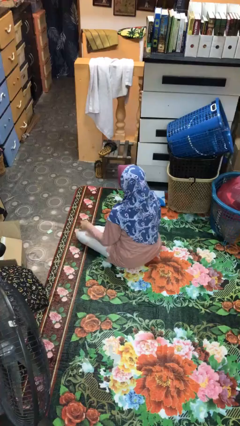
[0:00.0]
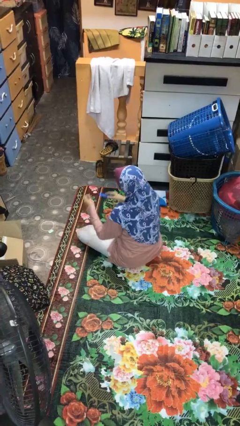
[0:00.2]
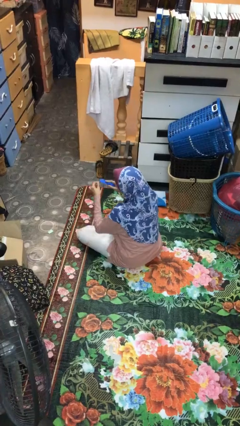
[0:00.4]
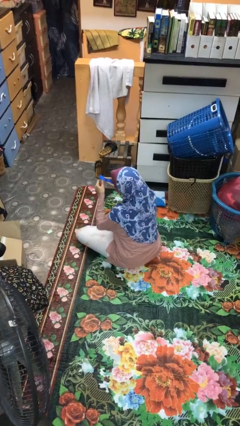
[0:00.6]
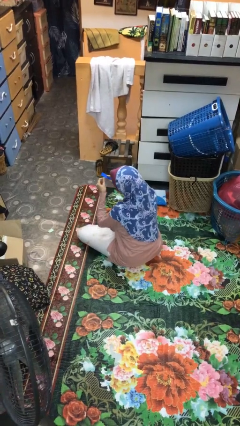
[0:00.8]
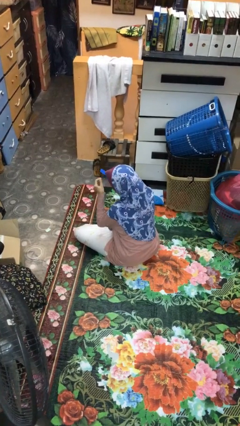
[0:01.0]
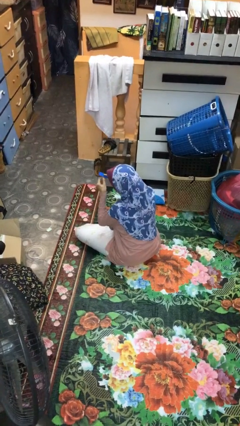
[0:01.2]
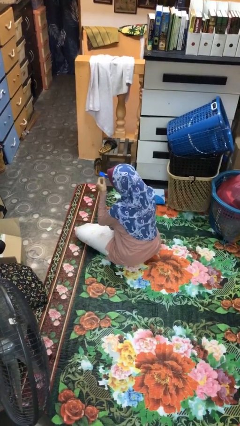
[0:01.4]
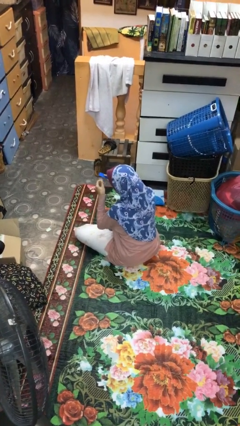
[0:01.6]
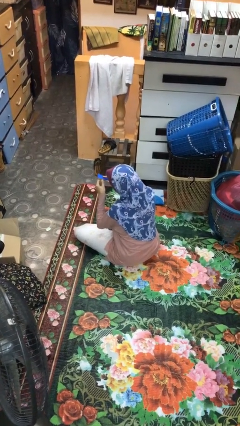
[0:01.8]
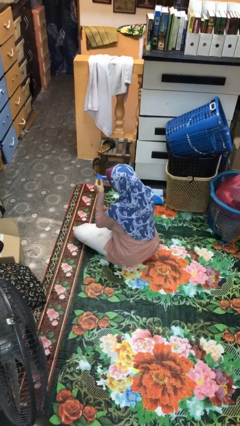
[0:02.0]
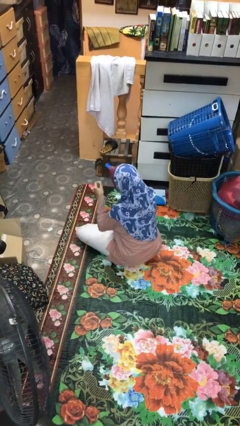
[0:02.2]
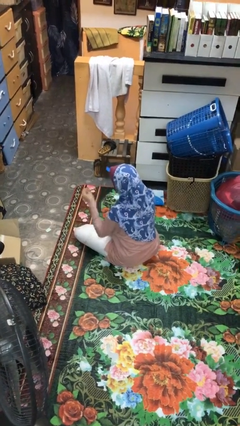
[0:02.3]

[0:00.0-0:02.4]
person files fingernails

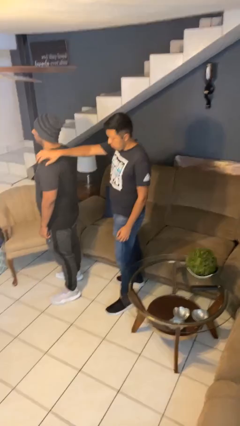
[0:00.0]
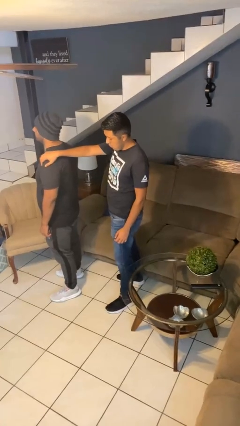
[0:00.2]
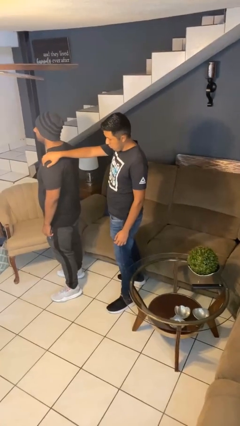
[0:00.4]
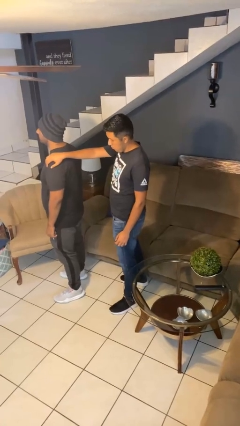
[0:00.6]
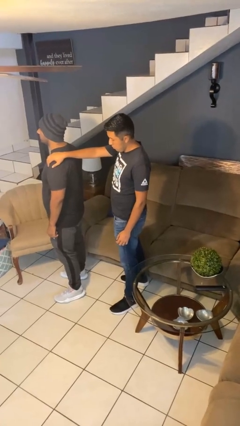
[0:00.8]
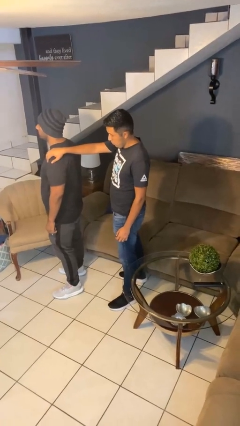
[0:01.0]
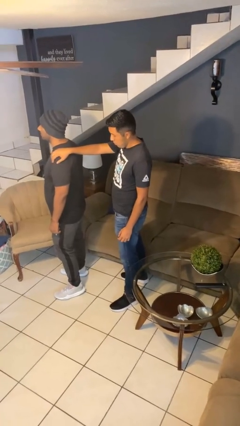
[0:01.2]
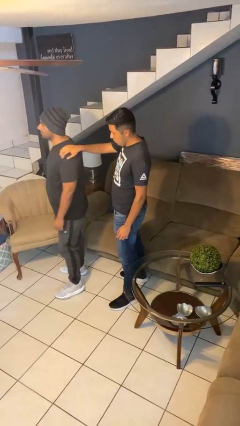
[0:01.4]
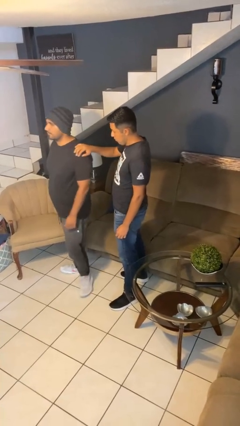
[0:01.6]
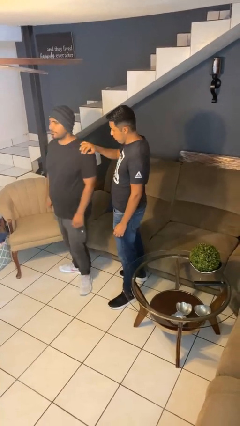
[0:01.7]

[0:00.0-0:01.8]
person grabs person by shoulder

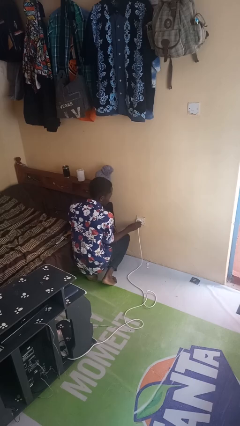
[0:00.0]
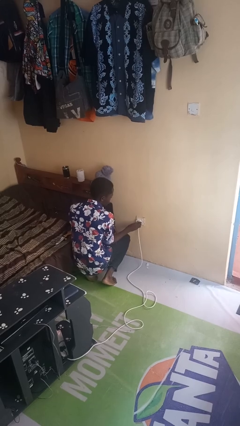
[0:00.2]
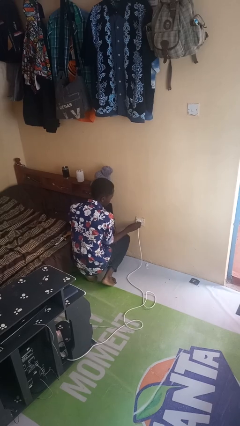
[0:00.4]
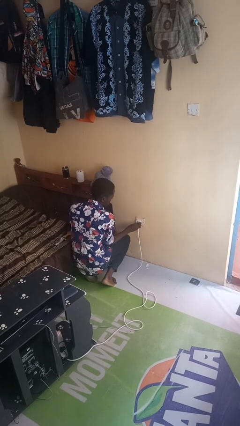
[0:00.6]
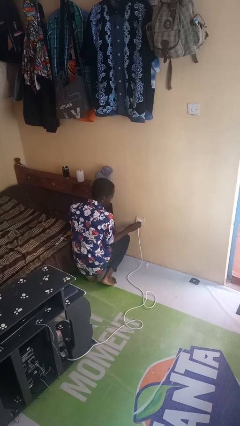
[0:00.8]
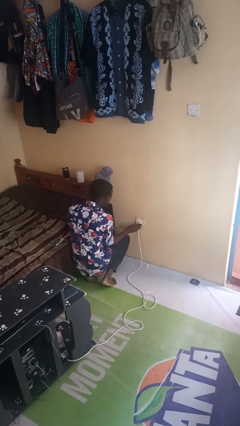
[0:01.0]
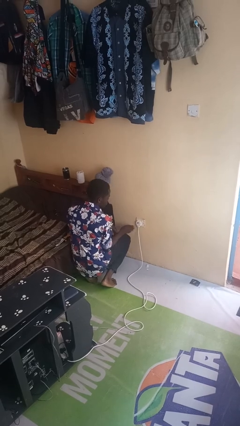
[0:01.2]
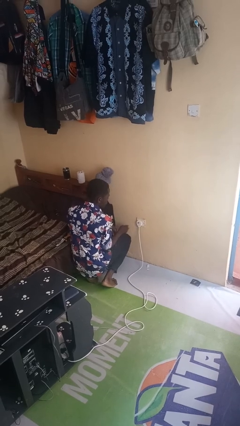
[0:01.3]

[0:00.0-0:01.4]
person plugs into electrical socket

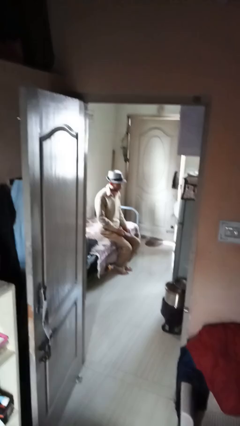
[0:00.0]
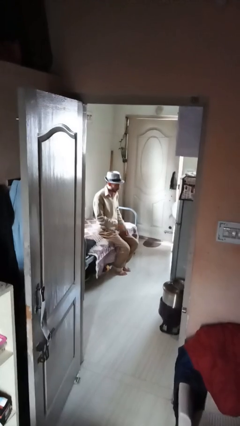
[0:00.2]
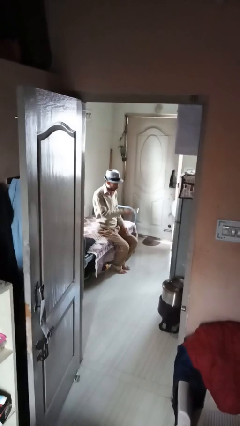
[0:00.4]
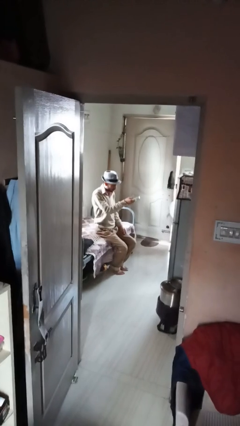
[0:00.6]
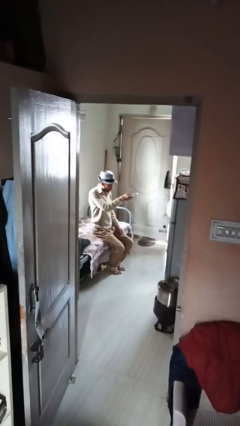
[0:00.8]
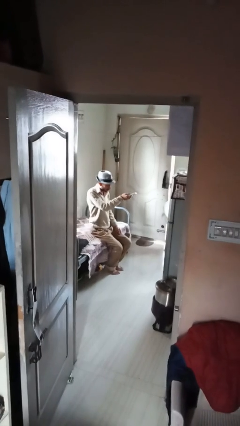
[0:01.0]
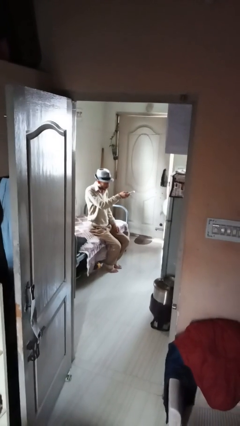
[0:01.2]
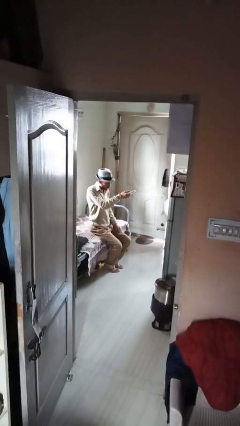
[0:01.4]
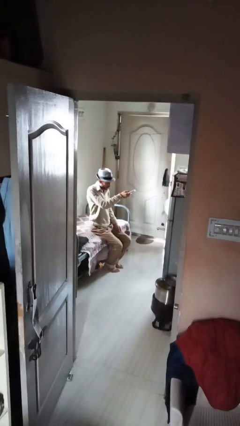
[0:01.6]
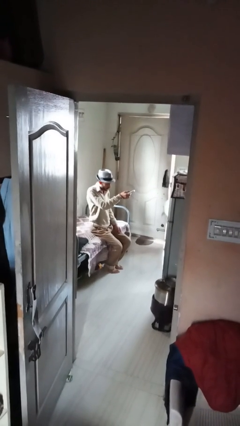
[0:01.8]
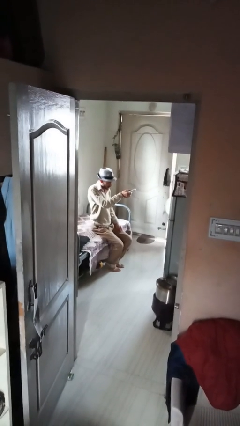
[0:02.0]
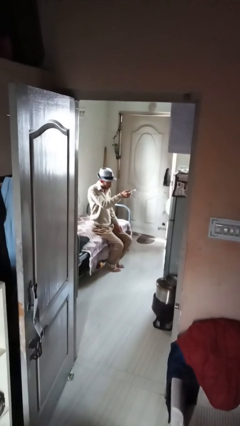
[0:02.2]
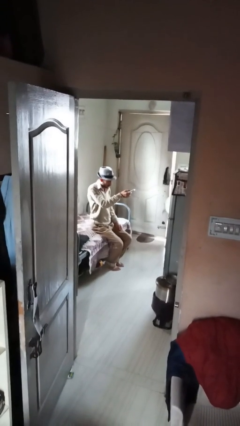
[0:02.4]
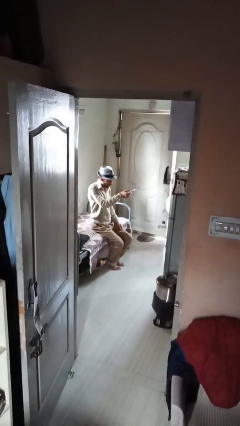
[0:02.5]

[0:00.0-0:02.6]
person uses television remote

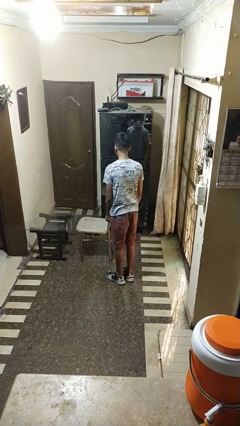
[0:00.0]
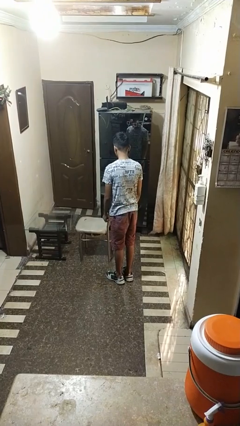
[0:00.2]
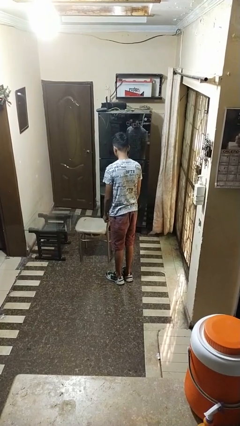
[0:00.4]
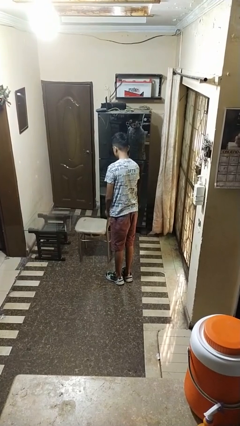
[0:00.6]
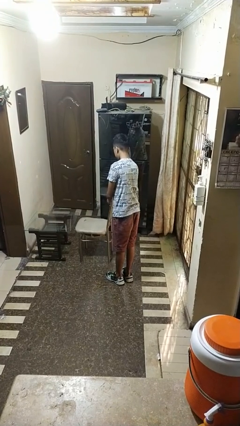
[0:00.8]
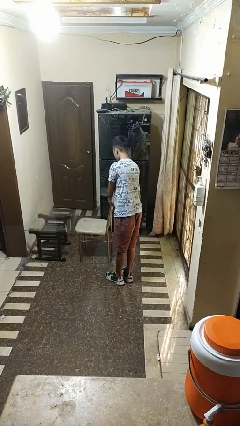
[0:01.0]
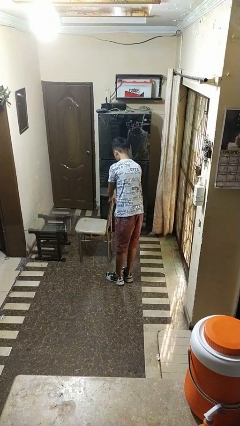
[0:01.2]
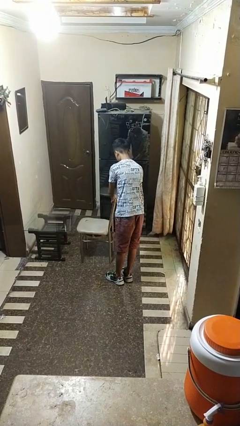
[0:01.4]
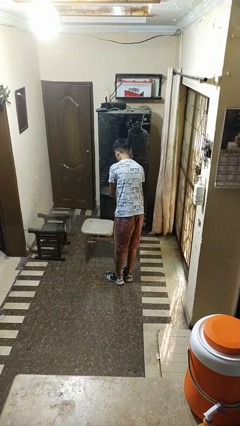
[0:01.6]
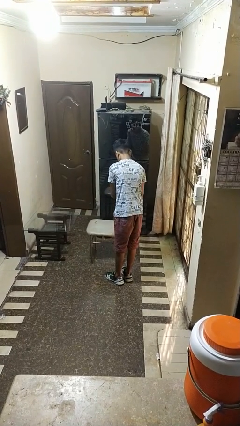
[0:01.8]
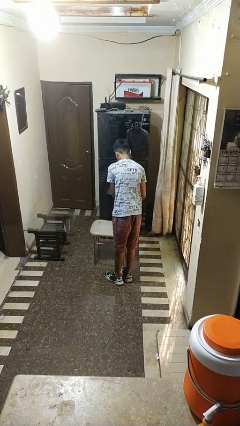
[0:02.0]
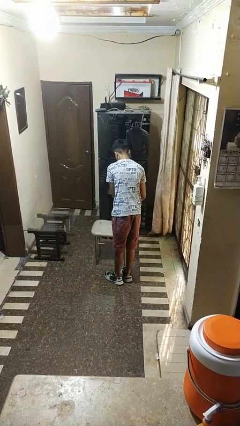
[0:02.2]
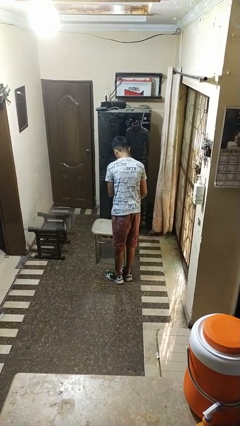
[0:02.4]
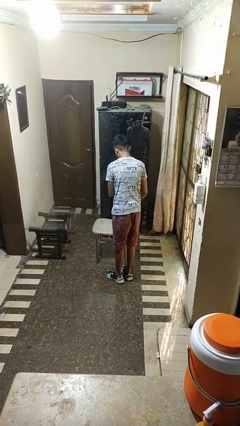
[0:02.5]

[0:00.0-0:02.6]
person pulls out chair

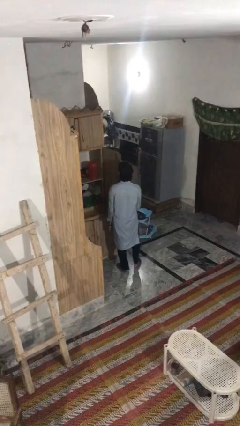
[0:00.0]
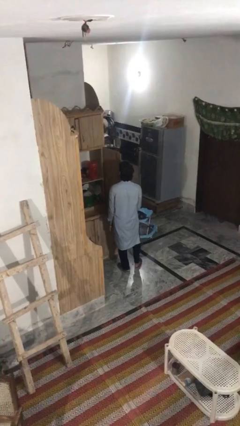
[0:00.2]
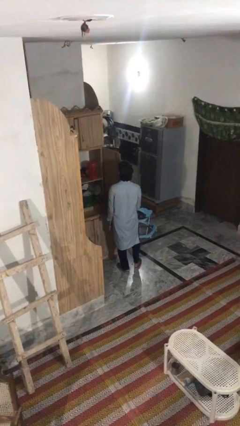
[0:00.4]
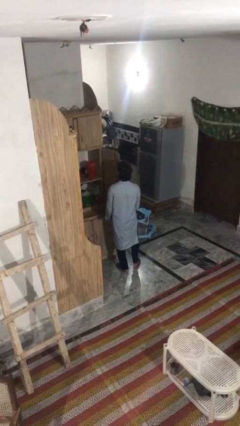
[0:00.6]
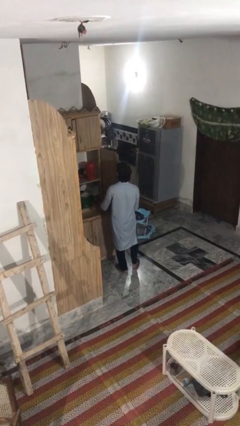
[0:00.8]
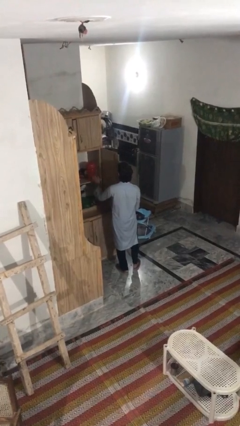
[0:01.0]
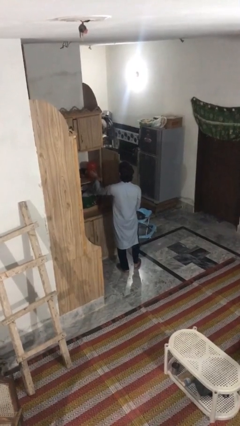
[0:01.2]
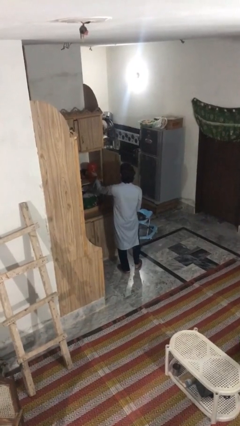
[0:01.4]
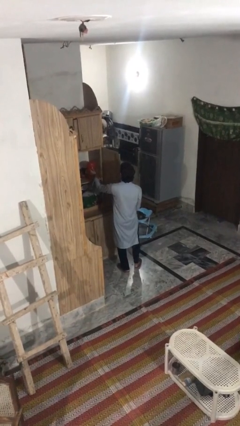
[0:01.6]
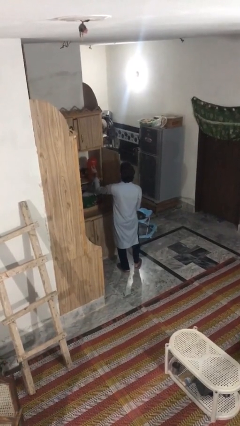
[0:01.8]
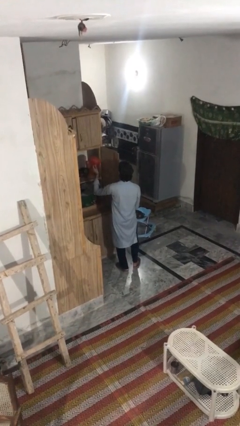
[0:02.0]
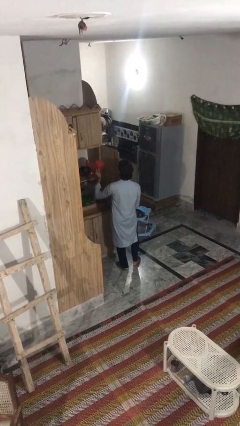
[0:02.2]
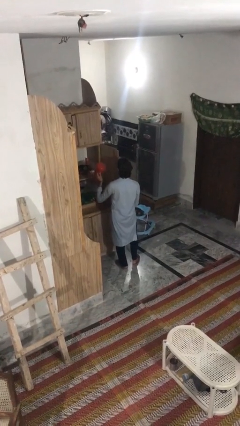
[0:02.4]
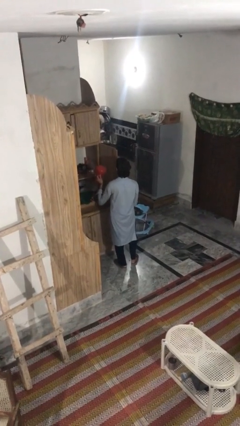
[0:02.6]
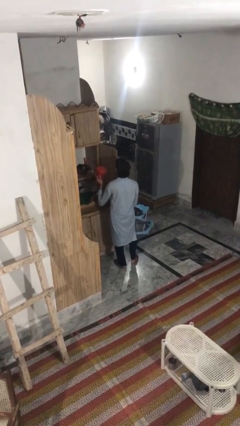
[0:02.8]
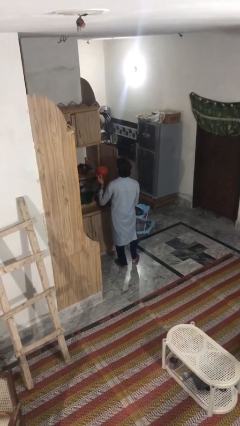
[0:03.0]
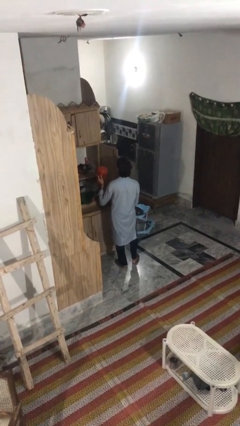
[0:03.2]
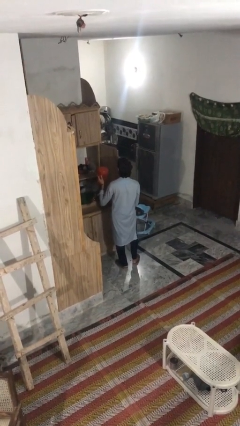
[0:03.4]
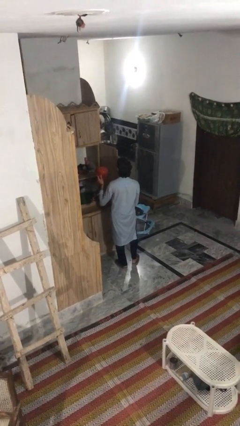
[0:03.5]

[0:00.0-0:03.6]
person picks up object from cabinet

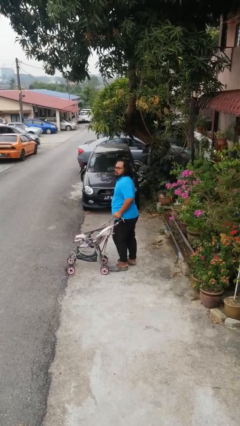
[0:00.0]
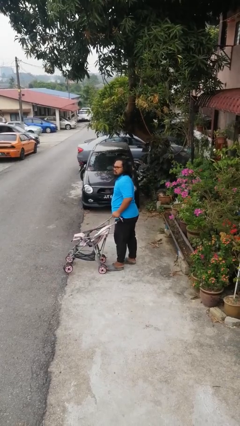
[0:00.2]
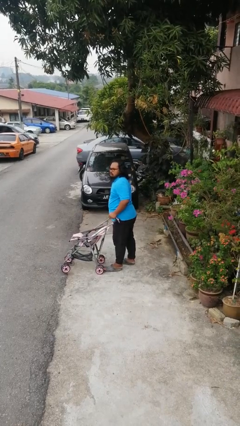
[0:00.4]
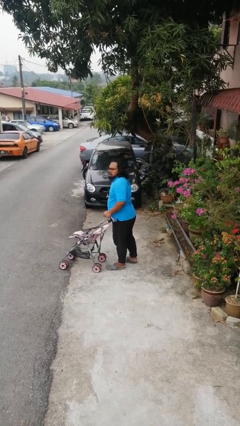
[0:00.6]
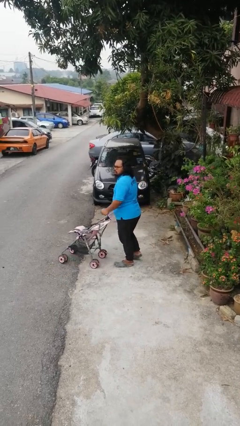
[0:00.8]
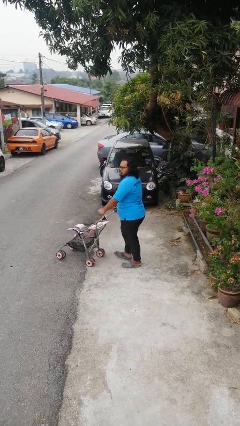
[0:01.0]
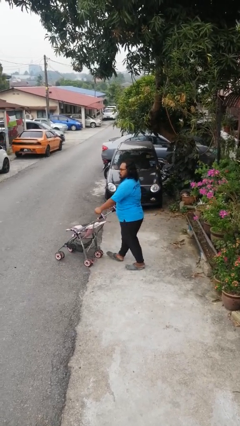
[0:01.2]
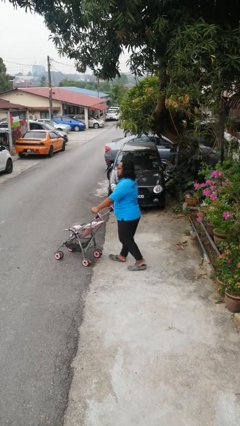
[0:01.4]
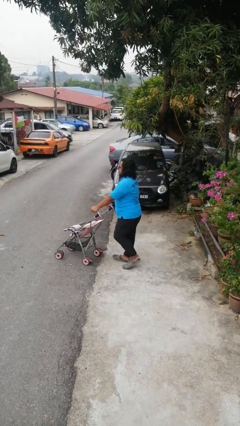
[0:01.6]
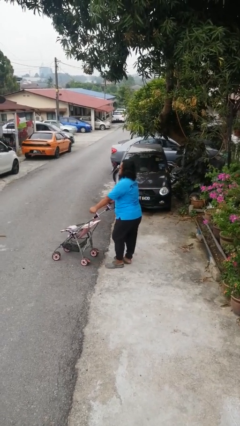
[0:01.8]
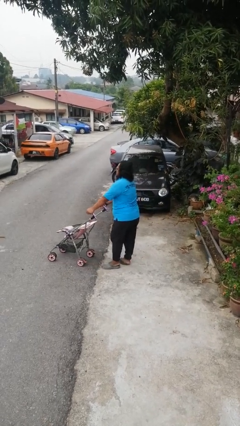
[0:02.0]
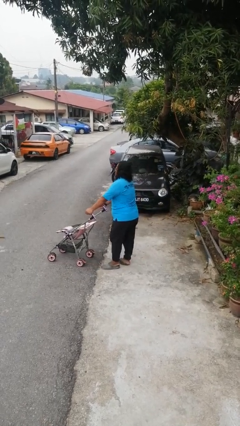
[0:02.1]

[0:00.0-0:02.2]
person pushes wheeled cart

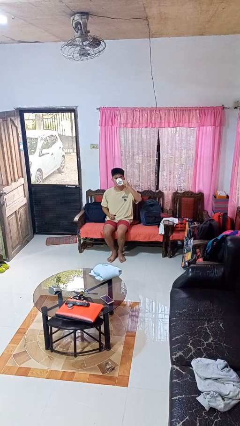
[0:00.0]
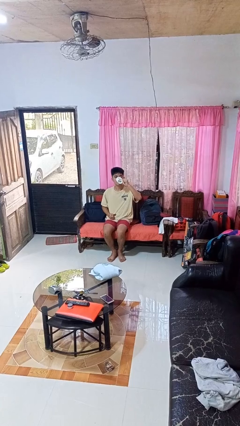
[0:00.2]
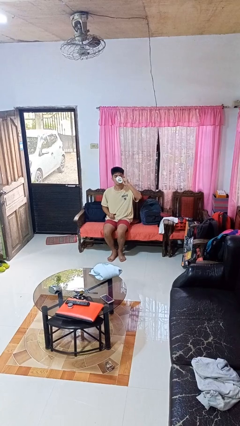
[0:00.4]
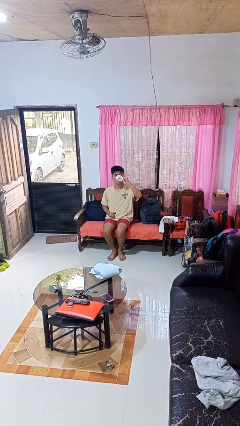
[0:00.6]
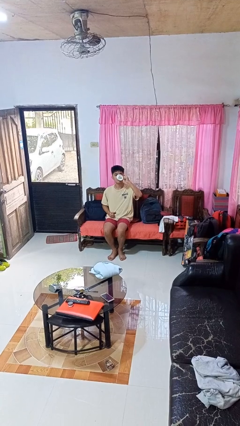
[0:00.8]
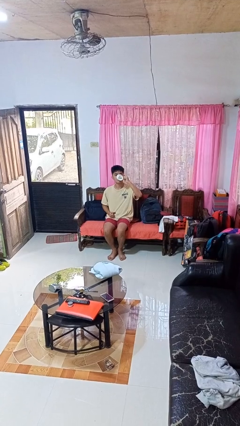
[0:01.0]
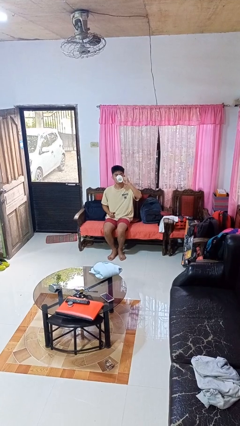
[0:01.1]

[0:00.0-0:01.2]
person drinks from mug
